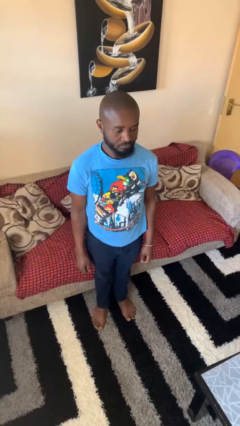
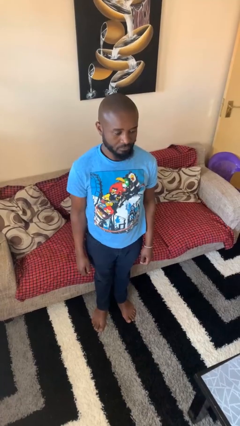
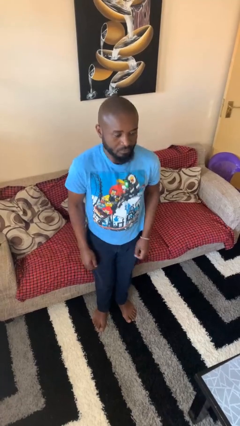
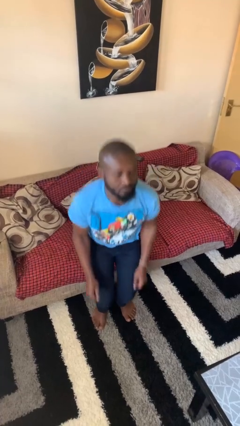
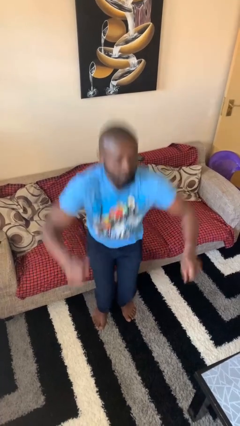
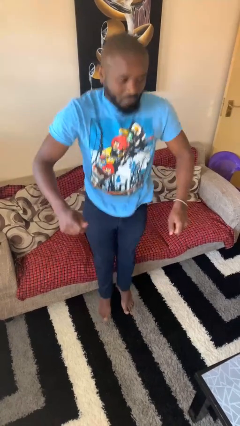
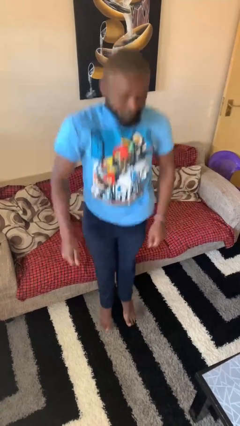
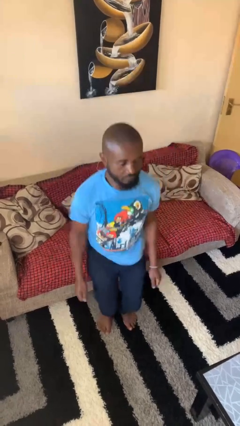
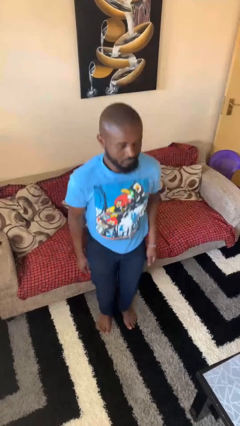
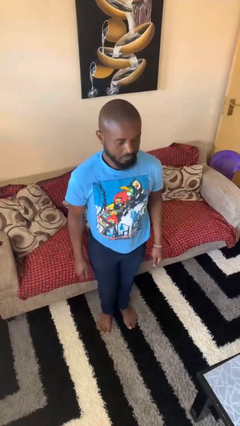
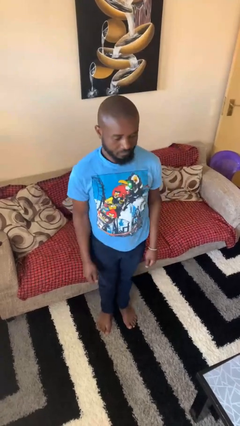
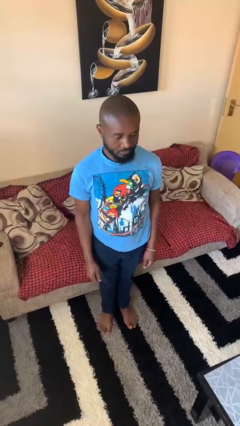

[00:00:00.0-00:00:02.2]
person jumps

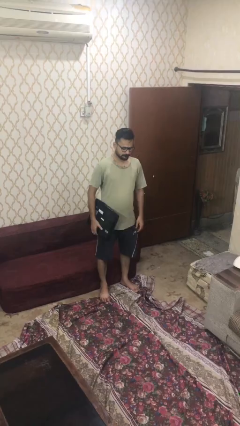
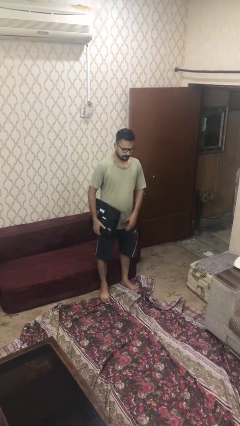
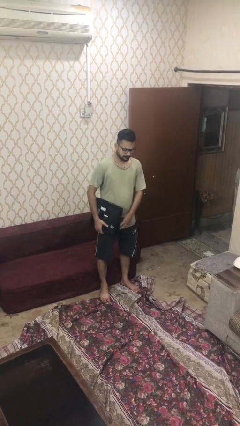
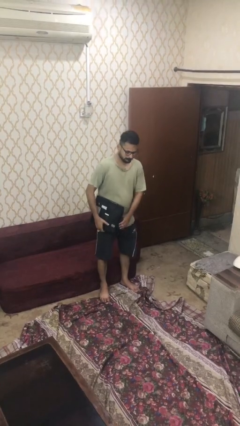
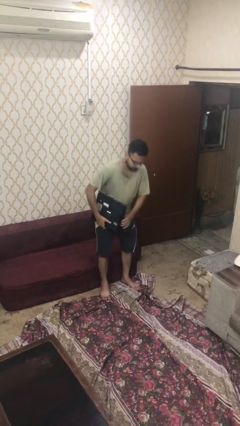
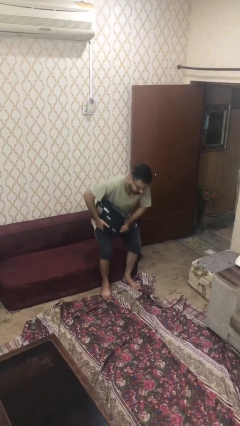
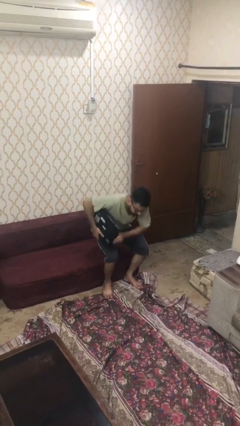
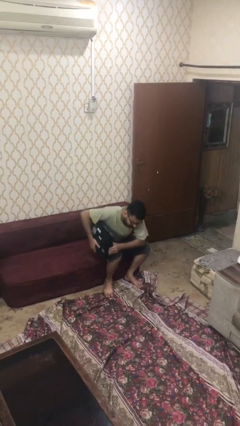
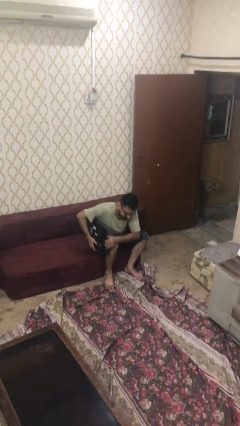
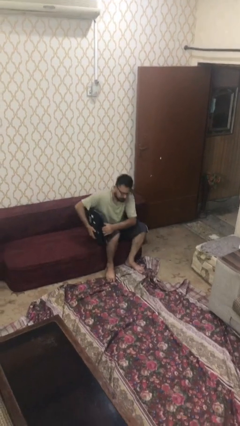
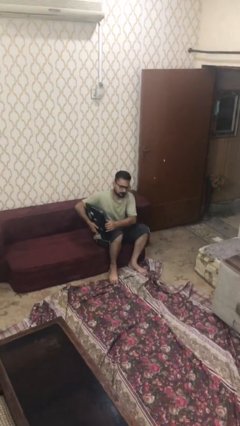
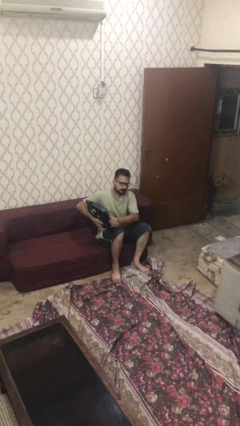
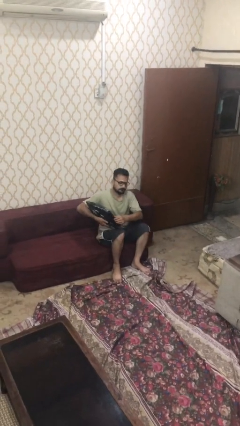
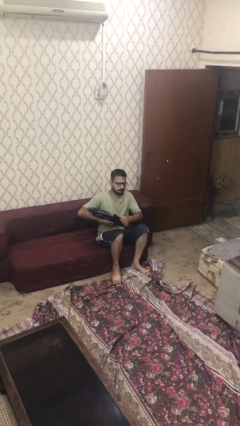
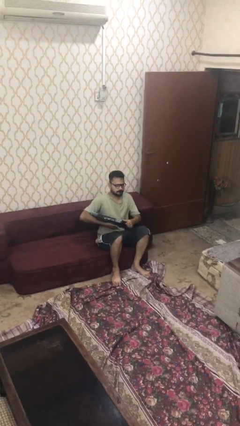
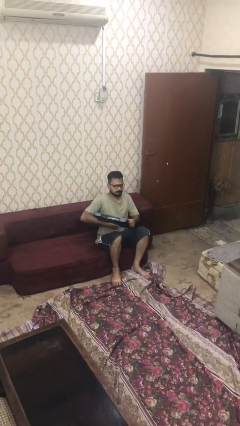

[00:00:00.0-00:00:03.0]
person sits down

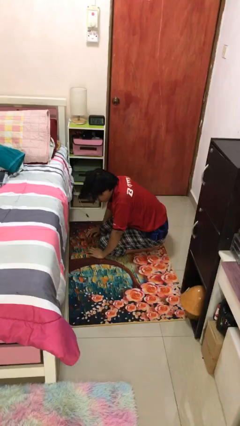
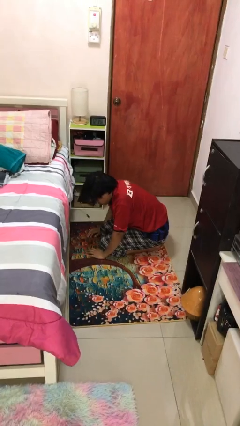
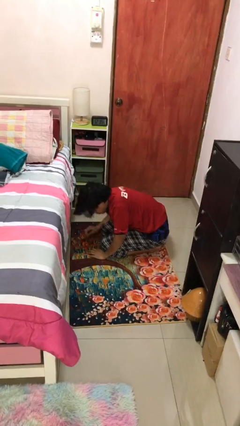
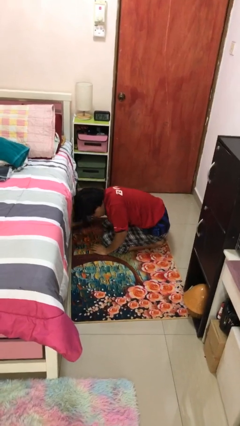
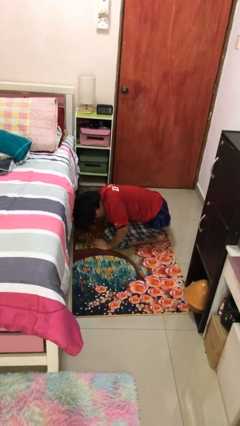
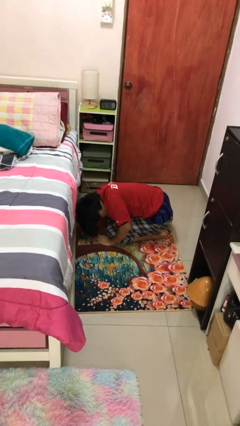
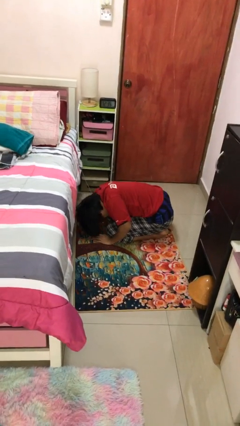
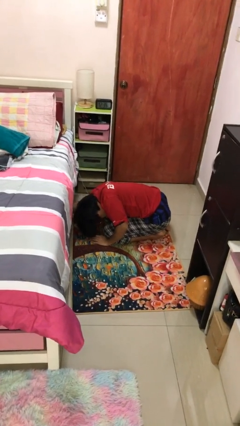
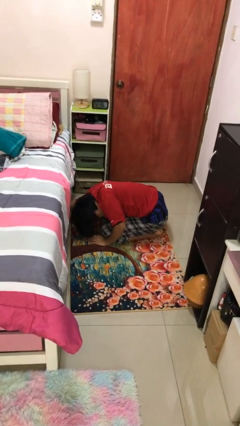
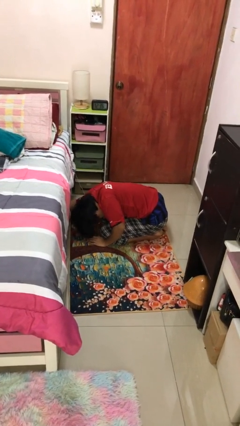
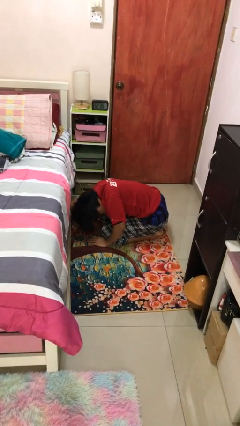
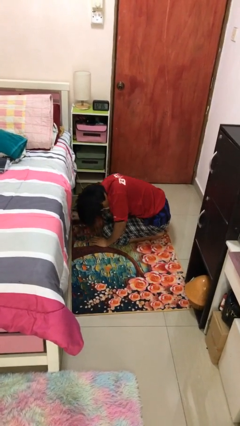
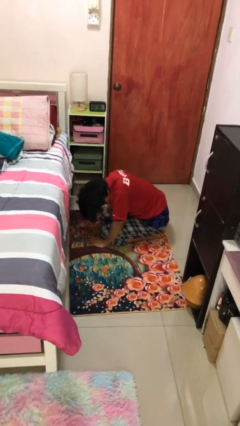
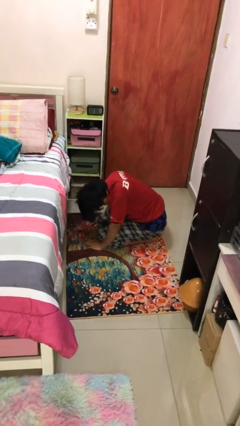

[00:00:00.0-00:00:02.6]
person searches under bed

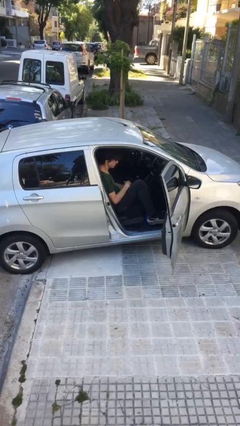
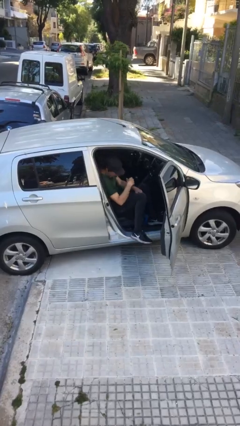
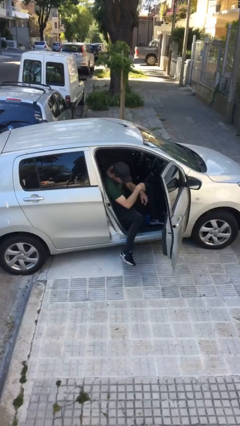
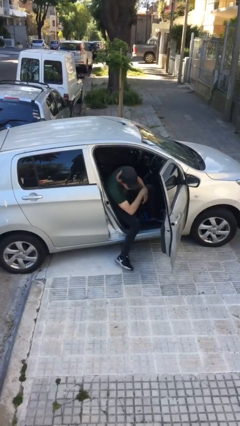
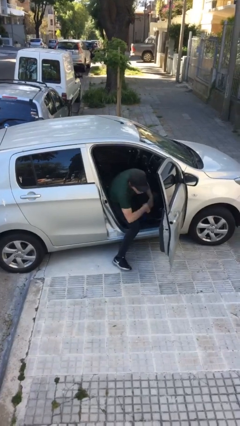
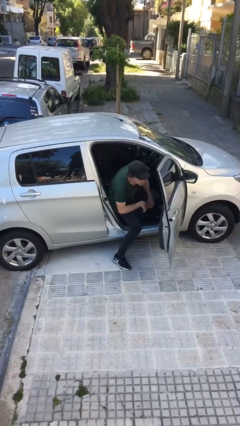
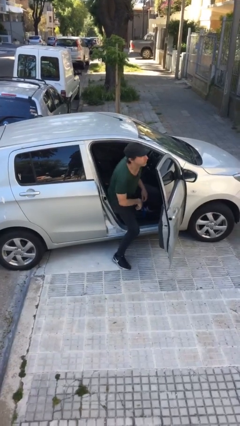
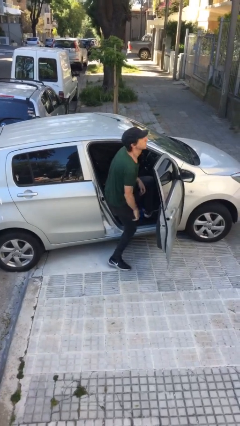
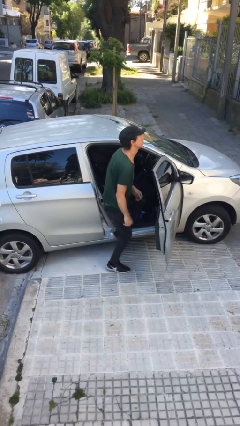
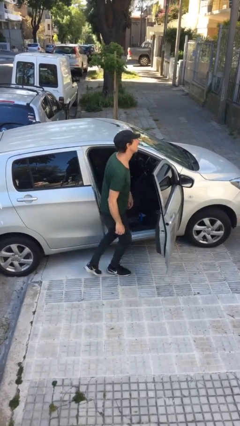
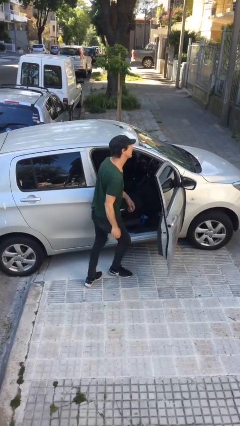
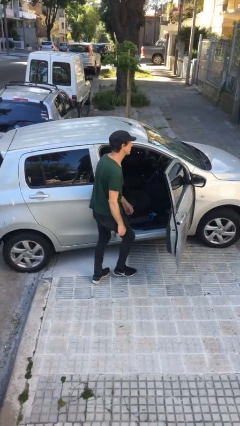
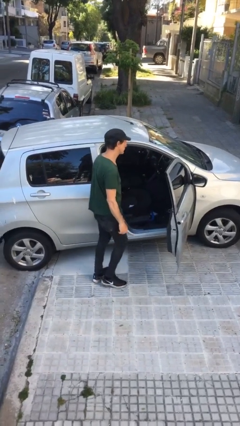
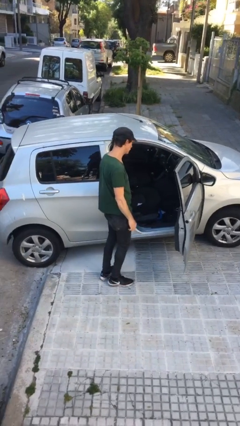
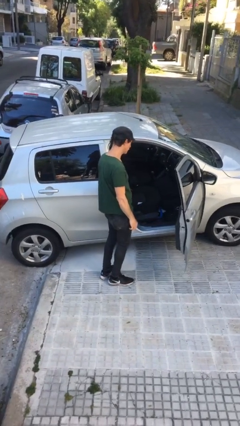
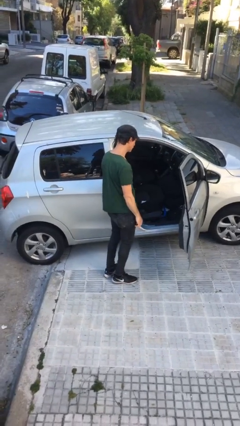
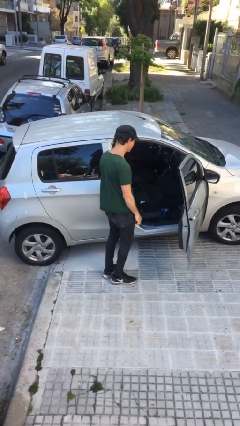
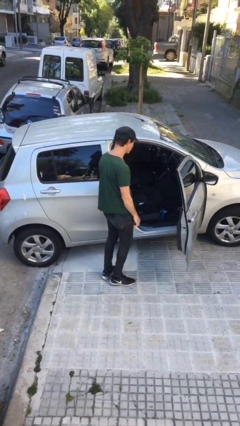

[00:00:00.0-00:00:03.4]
person exits car

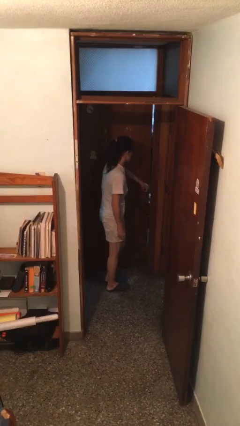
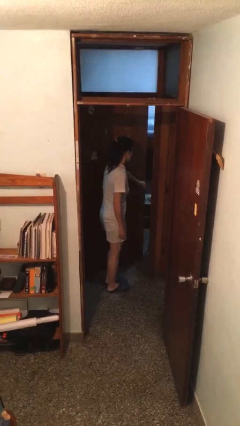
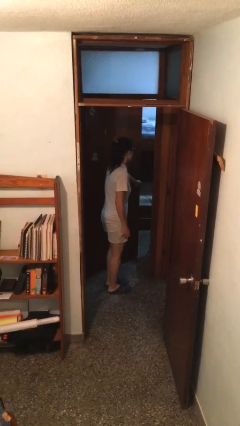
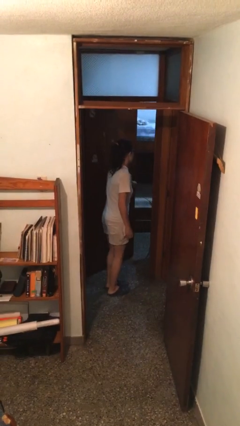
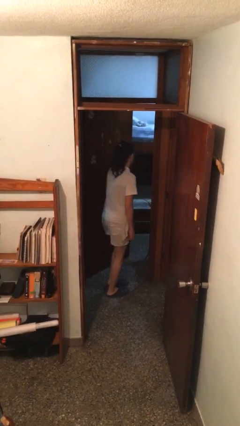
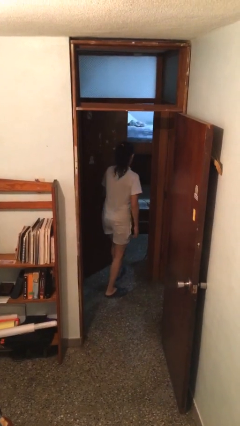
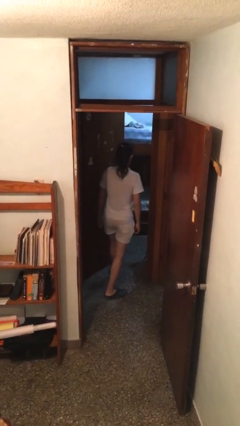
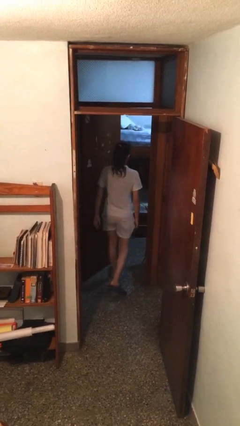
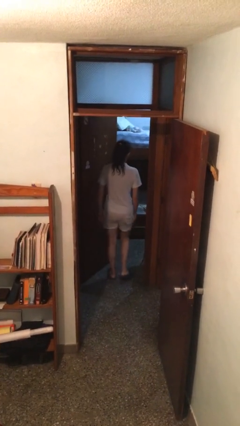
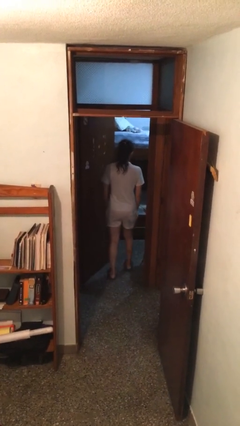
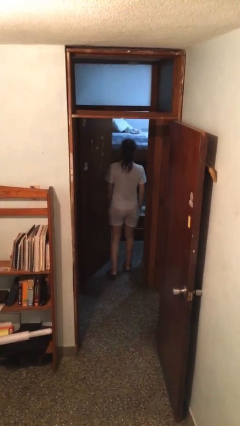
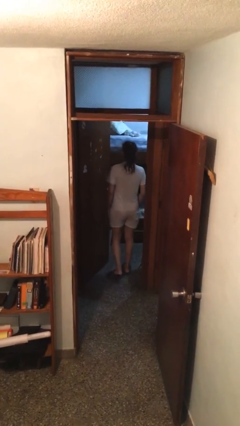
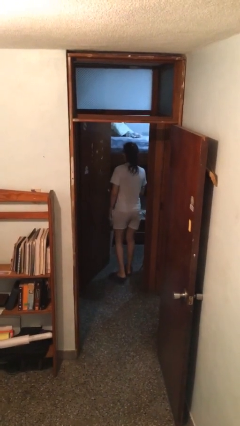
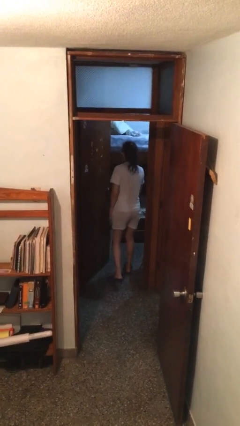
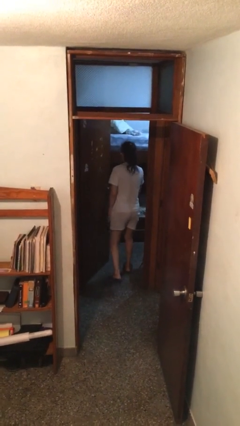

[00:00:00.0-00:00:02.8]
person opens facility door

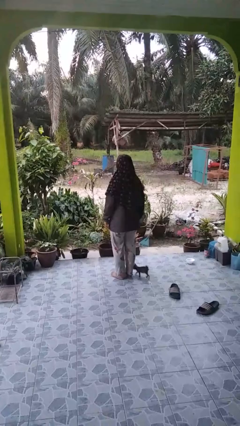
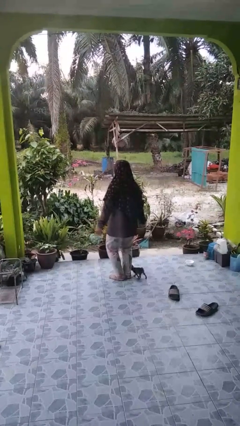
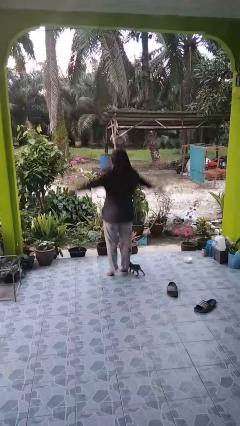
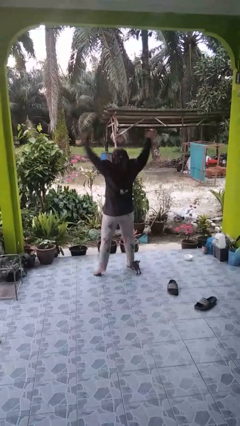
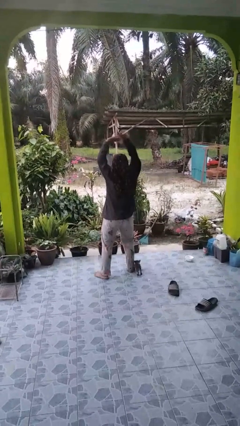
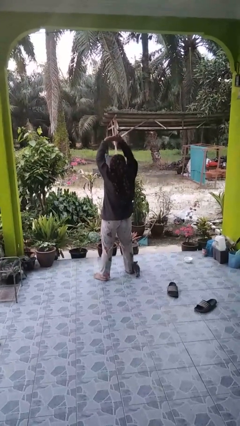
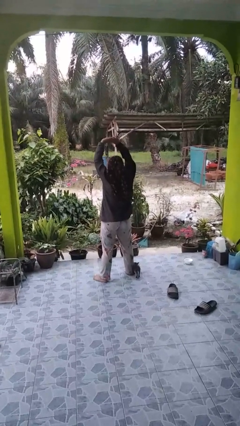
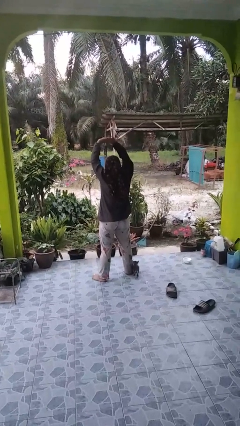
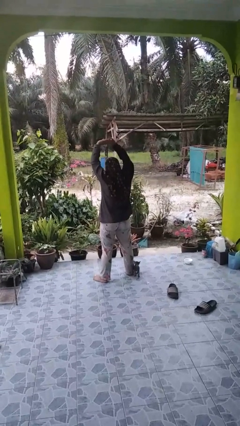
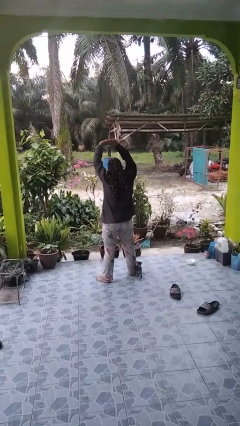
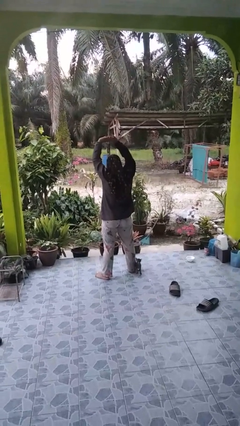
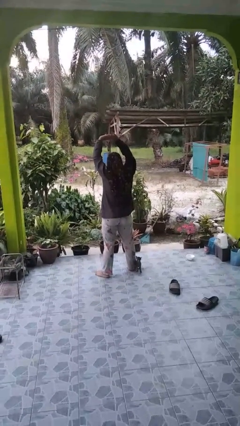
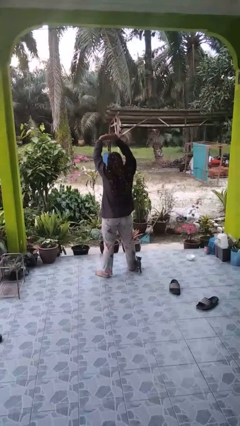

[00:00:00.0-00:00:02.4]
person exercises with jumping jacks

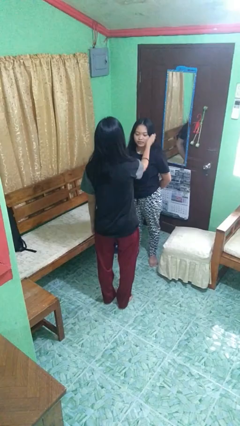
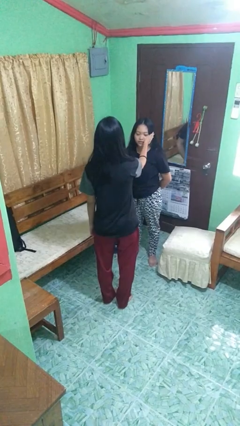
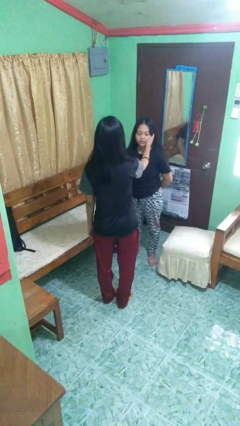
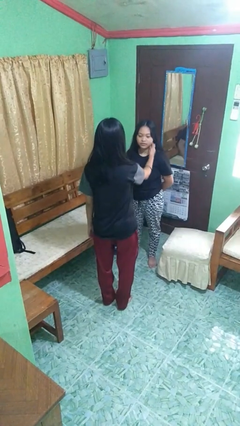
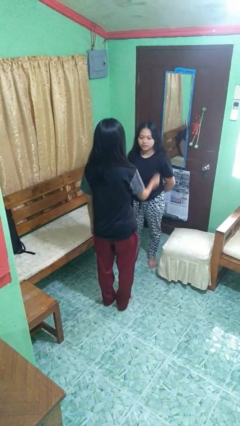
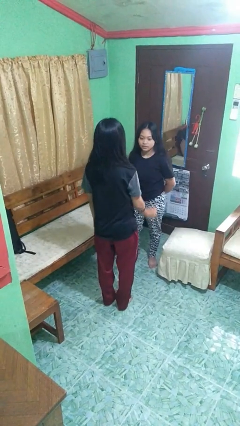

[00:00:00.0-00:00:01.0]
person touches face of person
